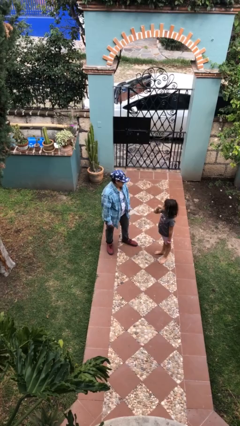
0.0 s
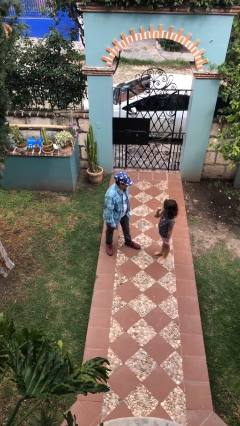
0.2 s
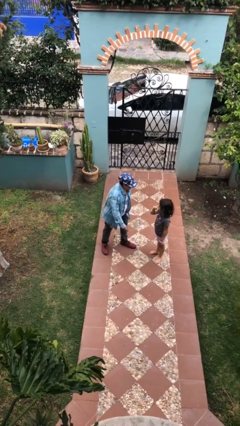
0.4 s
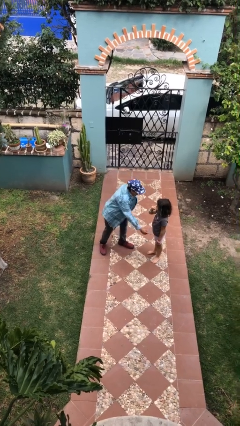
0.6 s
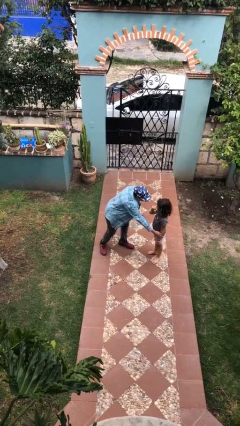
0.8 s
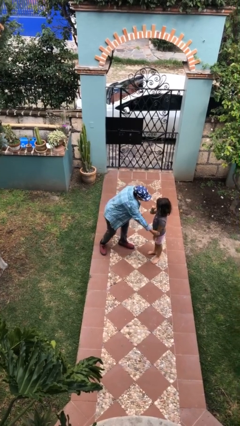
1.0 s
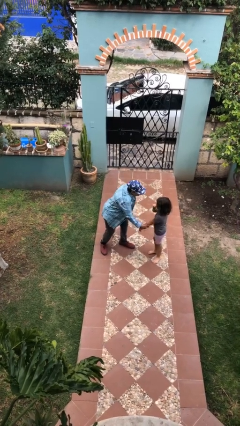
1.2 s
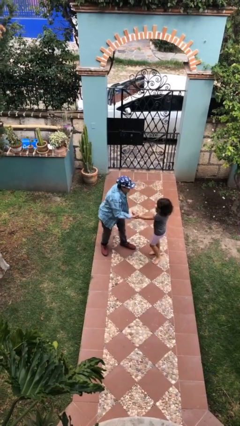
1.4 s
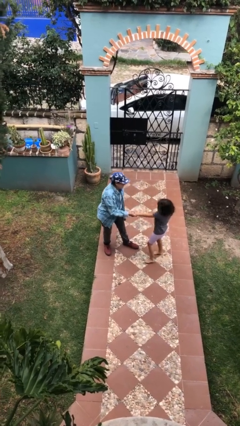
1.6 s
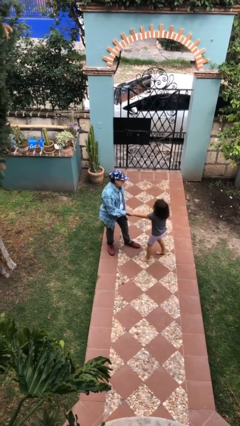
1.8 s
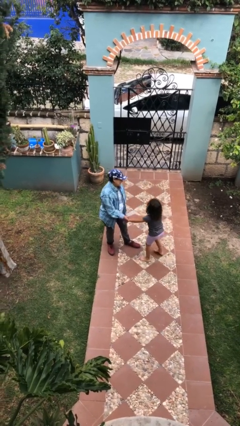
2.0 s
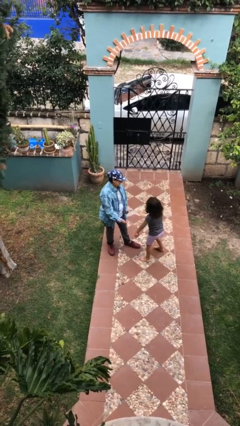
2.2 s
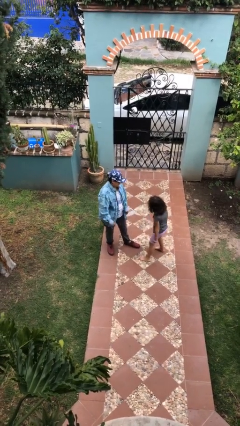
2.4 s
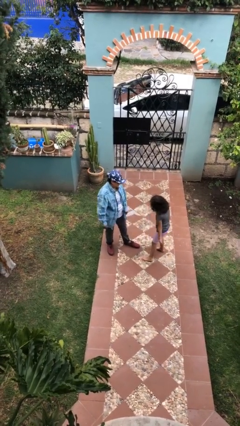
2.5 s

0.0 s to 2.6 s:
person grabs person by forearm

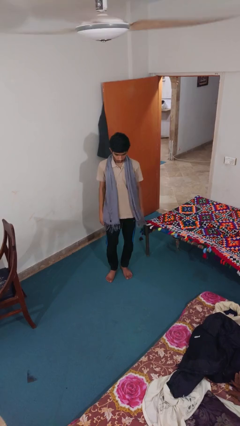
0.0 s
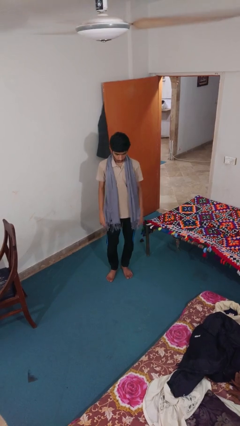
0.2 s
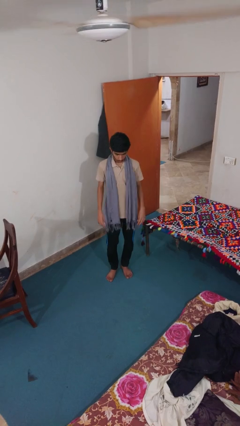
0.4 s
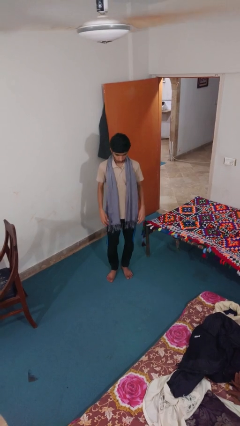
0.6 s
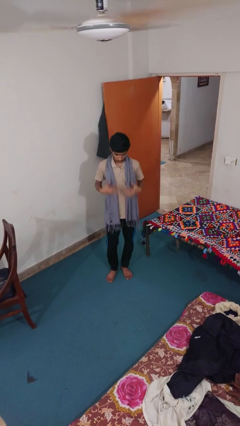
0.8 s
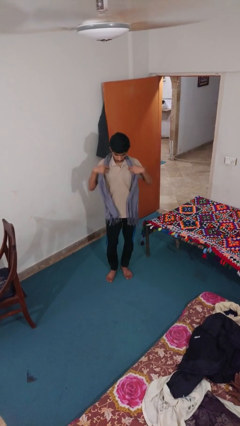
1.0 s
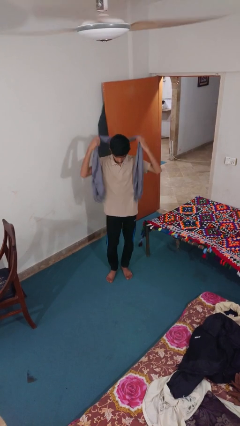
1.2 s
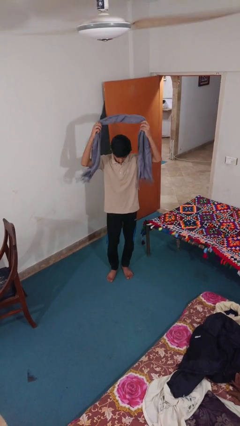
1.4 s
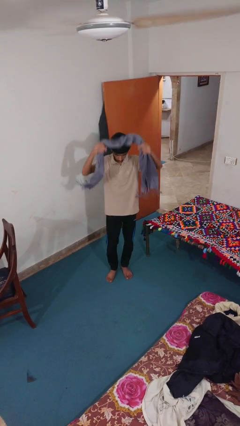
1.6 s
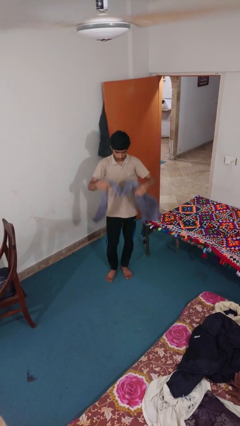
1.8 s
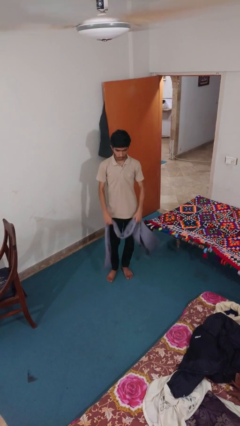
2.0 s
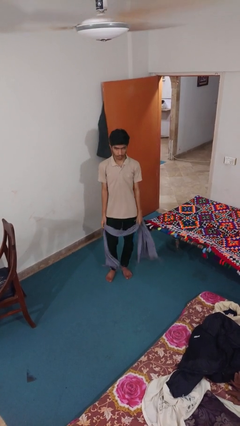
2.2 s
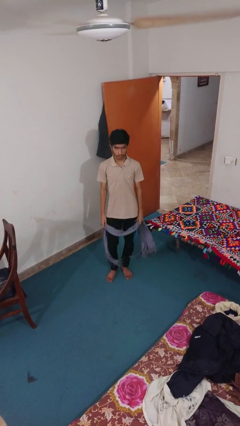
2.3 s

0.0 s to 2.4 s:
person takes off scarf

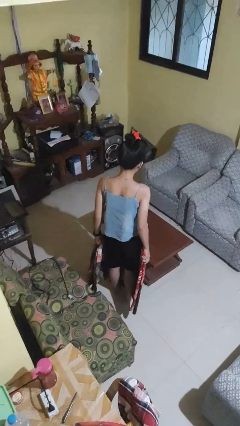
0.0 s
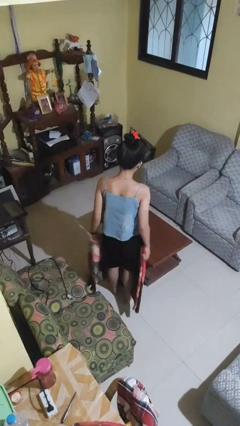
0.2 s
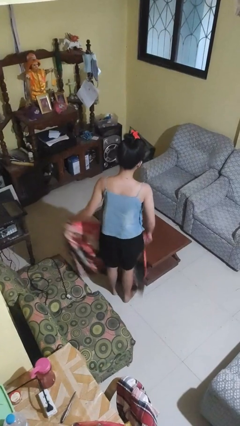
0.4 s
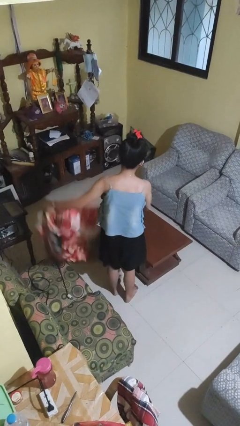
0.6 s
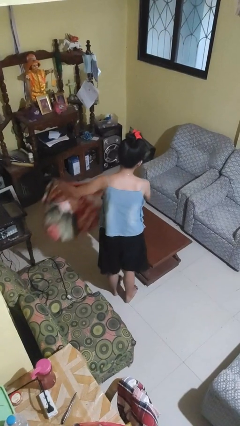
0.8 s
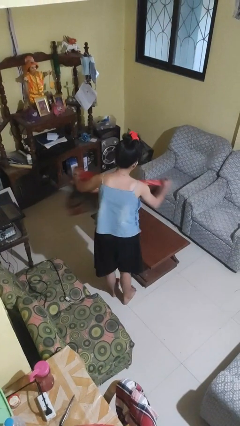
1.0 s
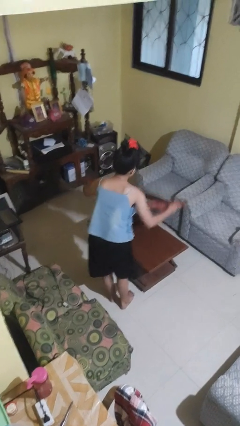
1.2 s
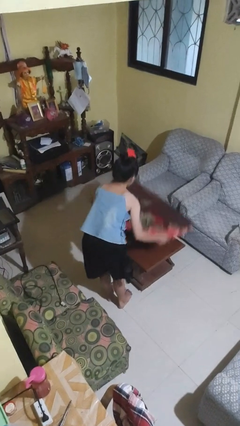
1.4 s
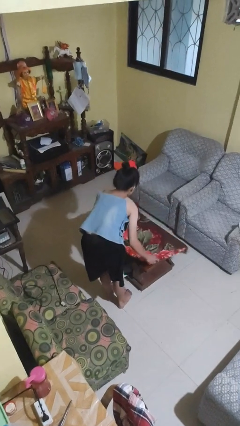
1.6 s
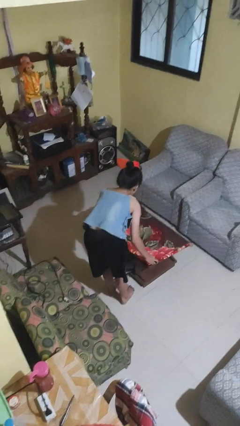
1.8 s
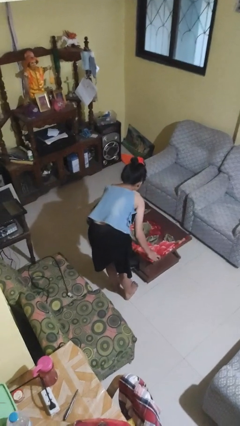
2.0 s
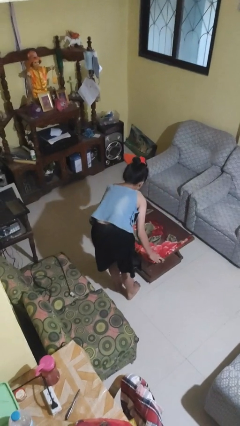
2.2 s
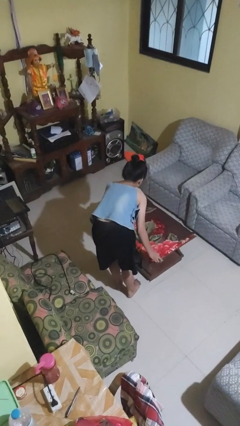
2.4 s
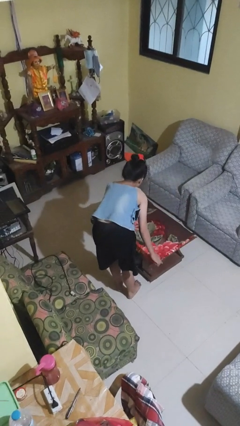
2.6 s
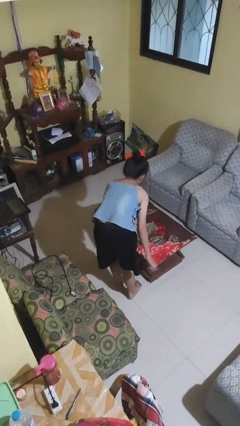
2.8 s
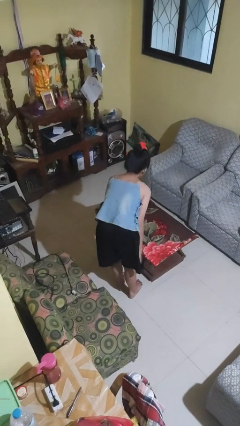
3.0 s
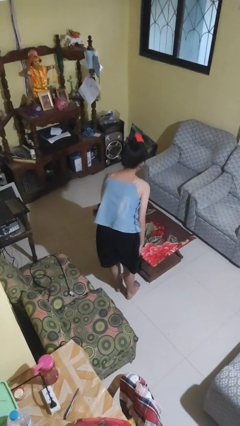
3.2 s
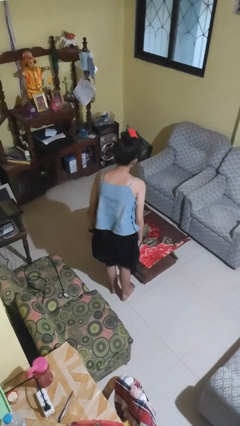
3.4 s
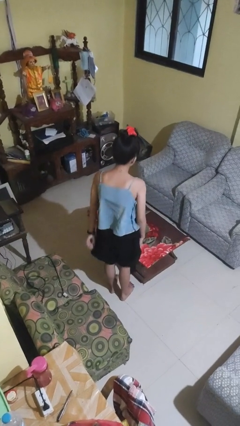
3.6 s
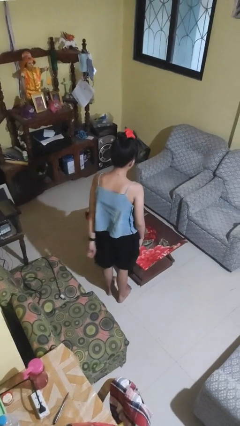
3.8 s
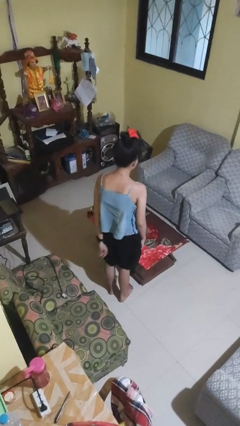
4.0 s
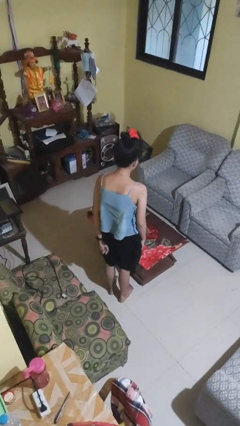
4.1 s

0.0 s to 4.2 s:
person spreads tablecloth

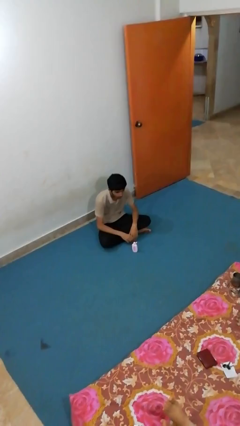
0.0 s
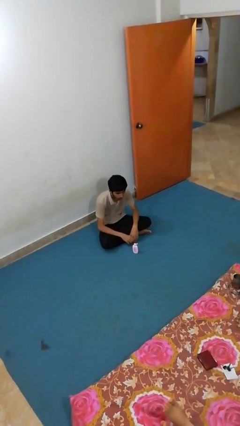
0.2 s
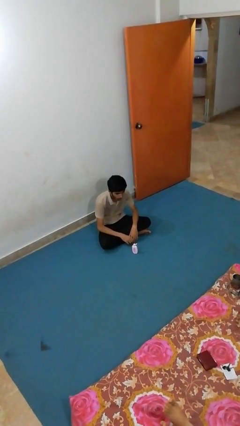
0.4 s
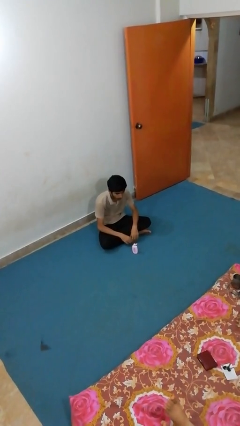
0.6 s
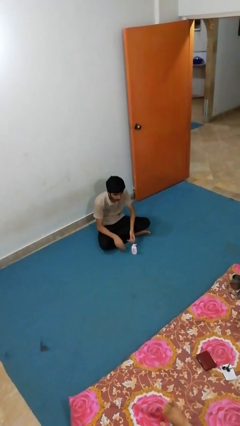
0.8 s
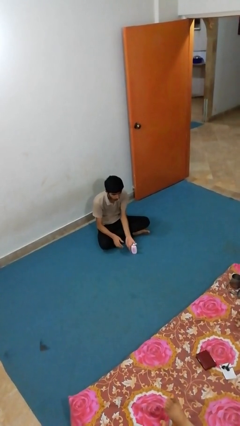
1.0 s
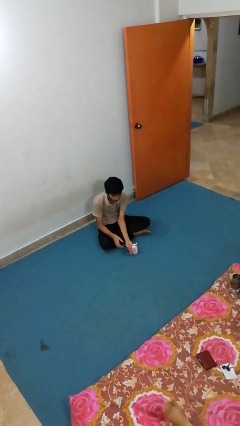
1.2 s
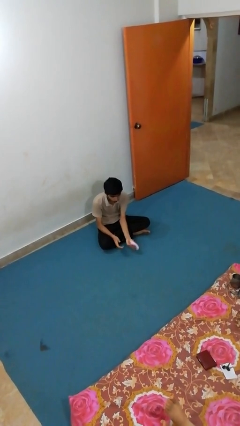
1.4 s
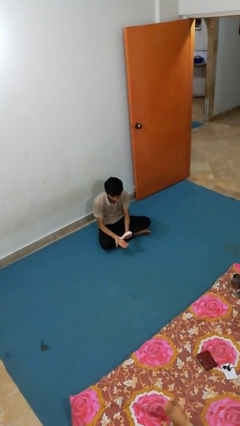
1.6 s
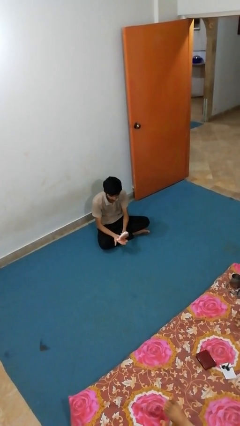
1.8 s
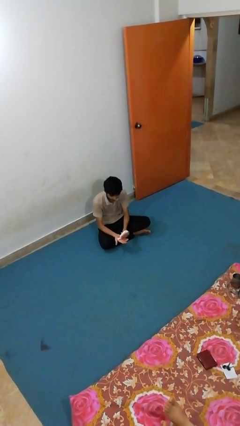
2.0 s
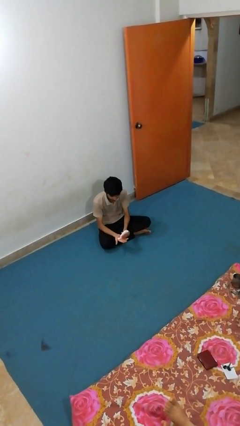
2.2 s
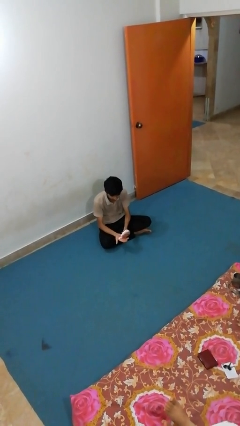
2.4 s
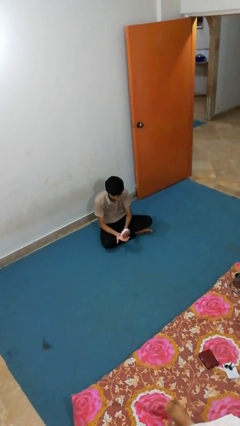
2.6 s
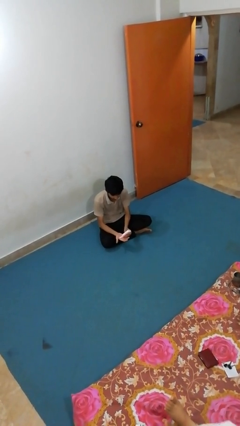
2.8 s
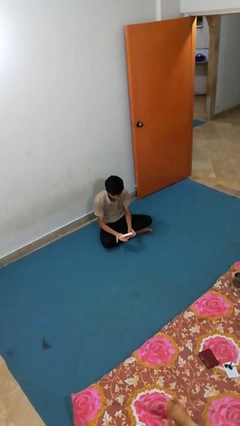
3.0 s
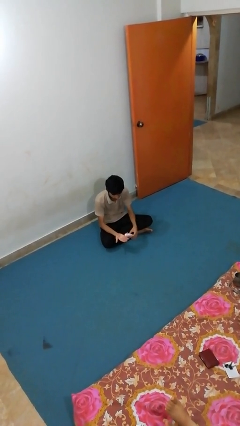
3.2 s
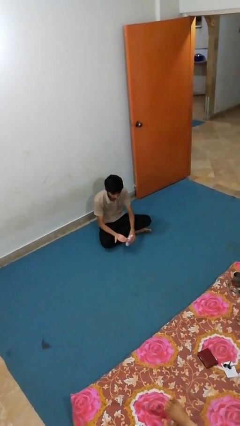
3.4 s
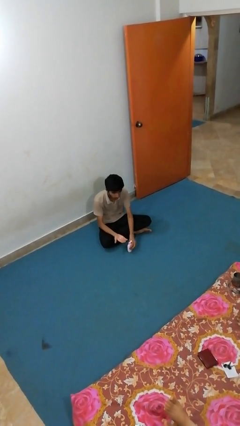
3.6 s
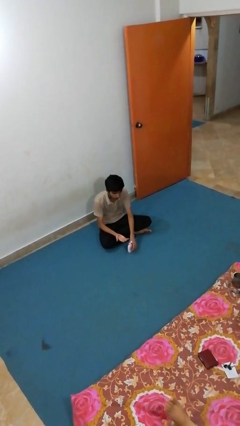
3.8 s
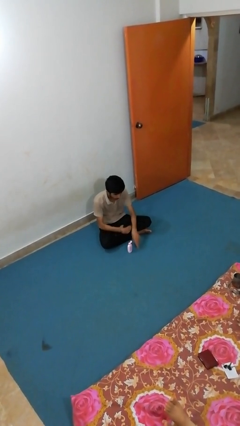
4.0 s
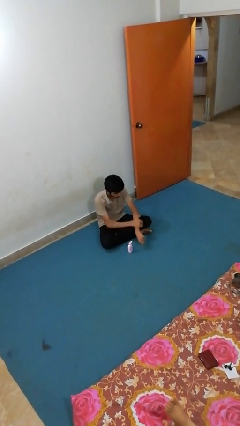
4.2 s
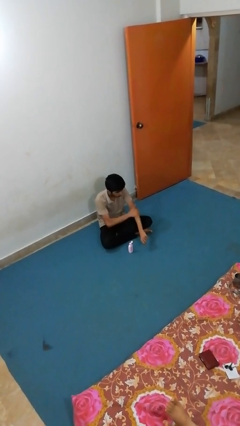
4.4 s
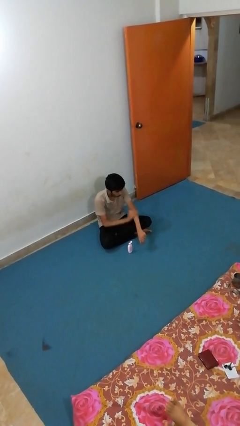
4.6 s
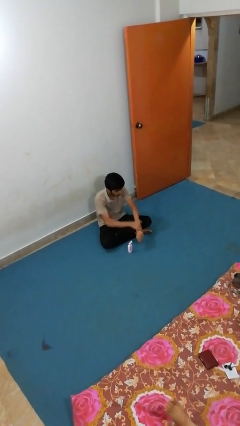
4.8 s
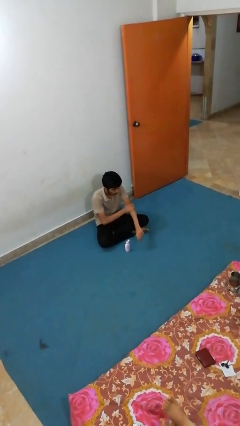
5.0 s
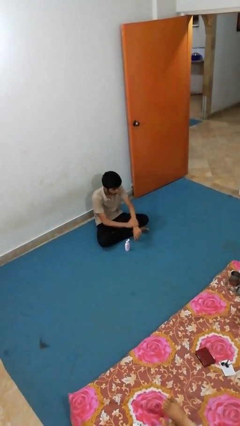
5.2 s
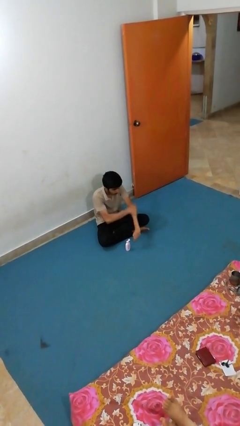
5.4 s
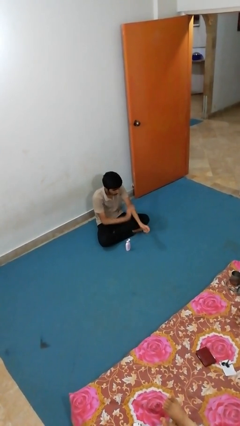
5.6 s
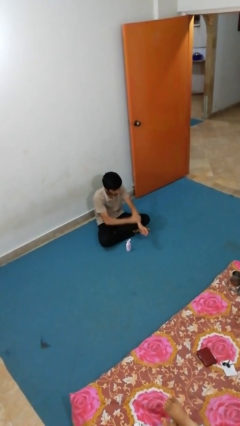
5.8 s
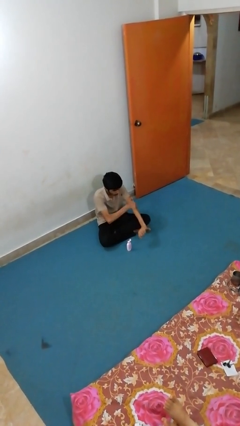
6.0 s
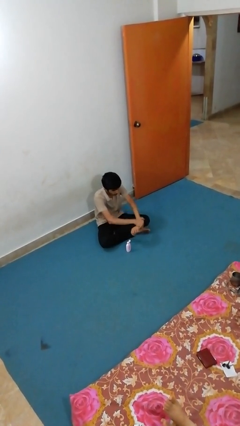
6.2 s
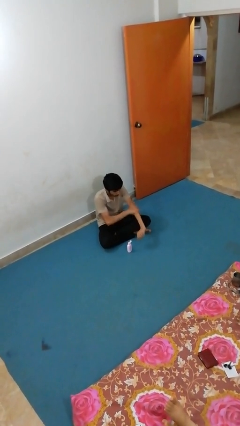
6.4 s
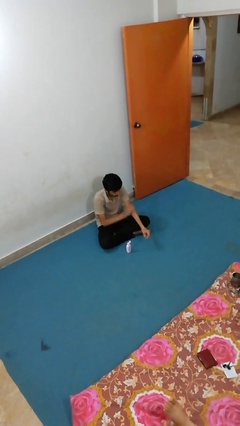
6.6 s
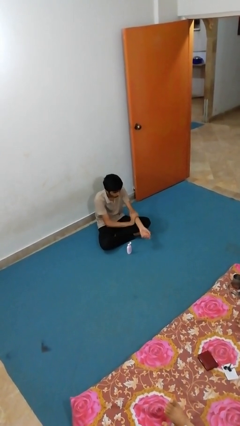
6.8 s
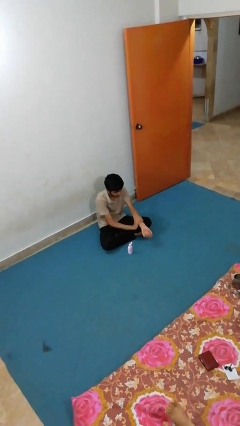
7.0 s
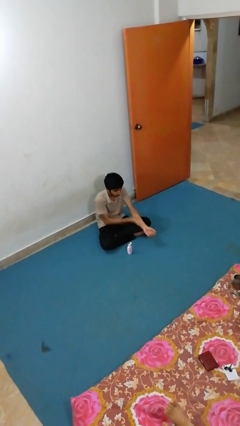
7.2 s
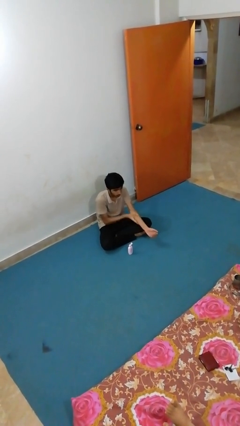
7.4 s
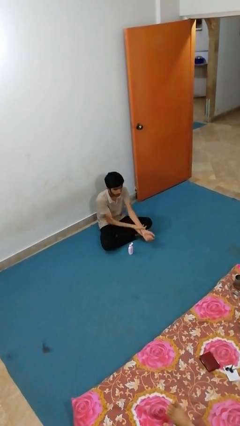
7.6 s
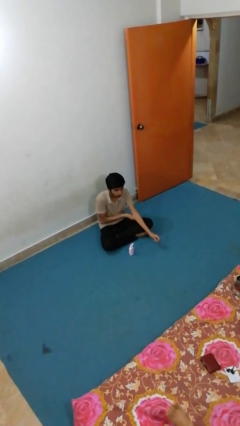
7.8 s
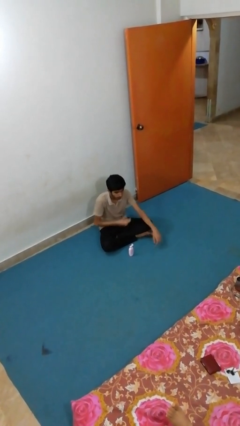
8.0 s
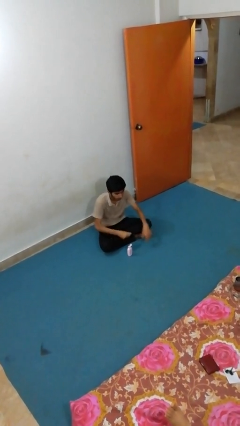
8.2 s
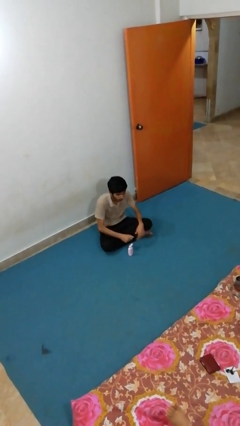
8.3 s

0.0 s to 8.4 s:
person applies sunscreen
